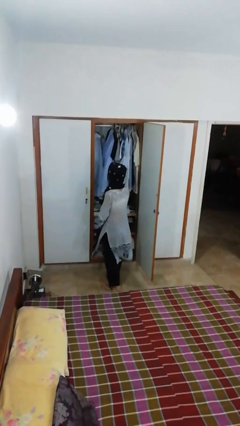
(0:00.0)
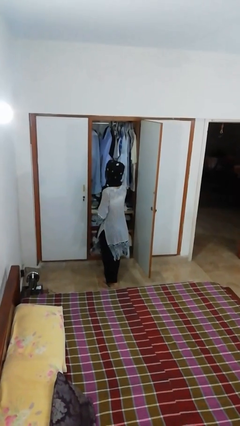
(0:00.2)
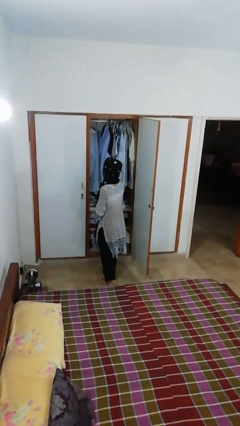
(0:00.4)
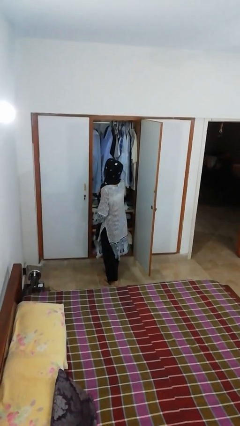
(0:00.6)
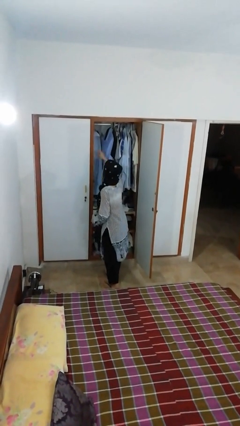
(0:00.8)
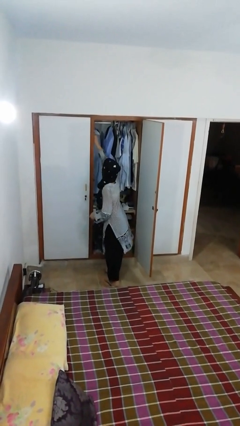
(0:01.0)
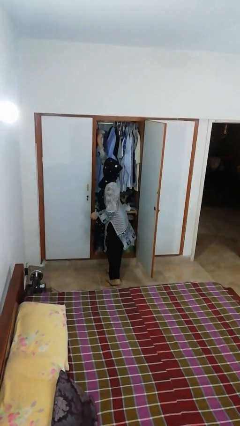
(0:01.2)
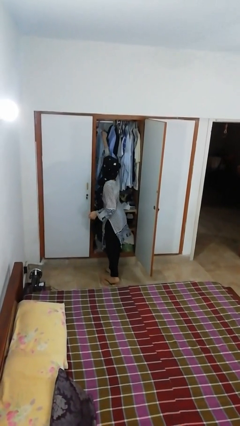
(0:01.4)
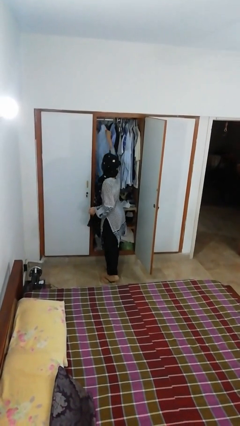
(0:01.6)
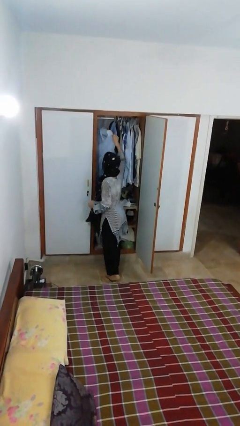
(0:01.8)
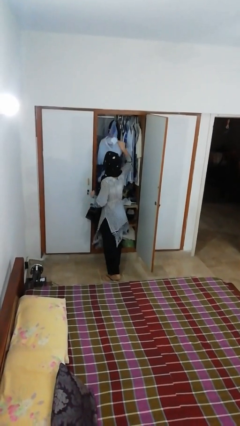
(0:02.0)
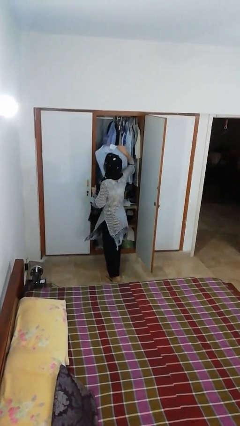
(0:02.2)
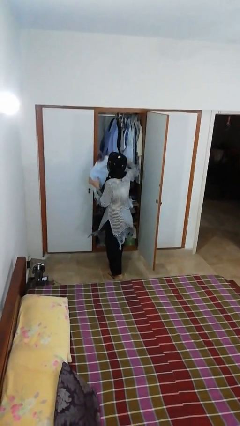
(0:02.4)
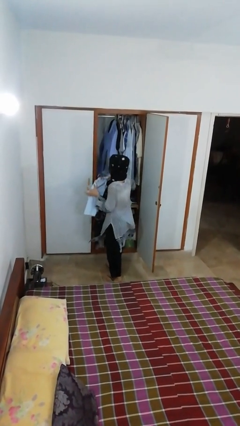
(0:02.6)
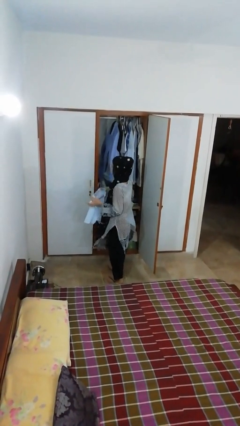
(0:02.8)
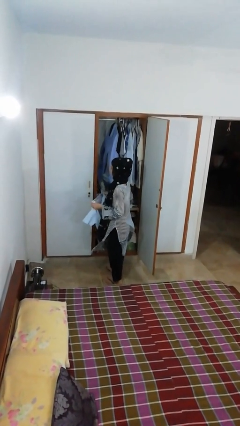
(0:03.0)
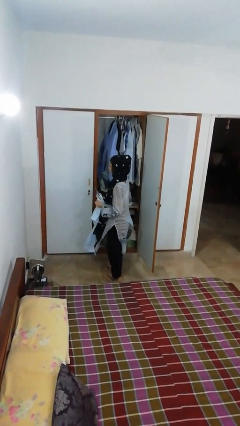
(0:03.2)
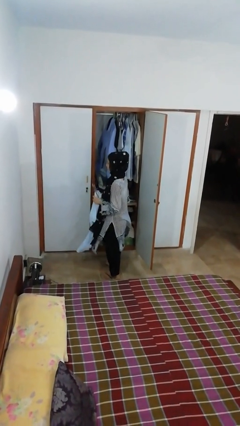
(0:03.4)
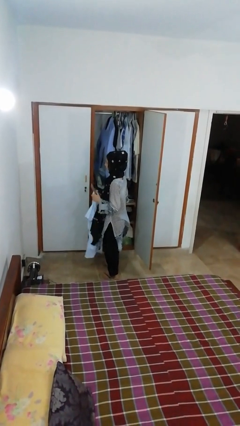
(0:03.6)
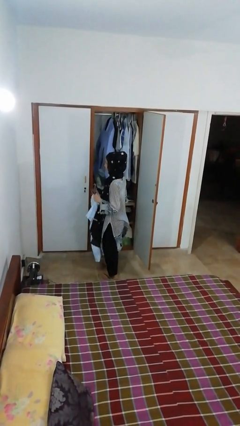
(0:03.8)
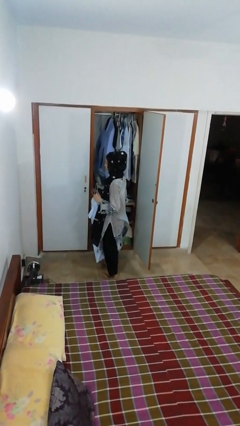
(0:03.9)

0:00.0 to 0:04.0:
person takes clothes from closet

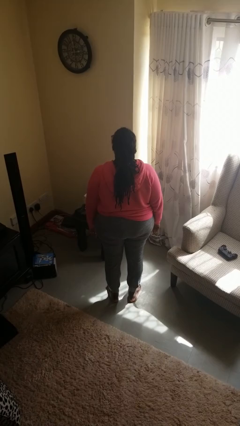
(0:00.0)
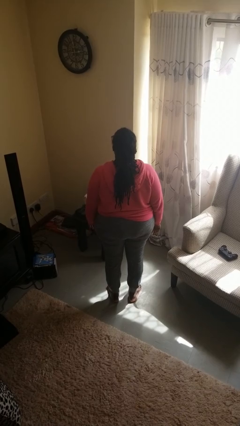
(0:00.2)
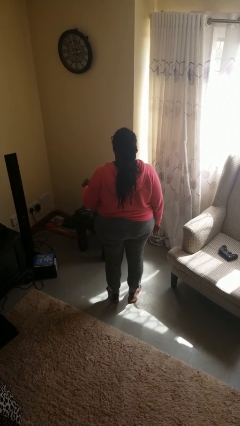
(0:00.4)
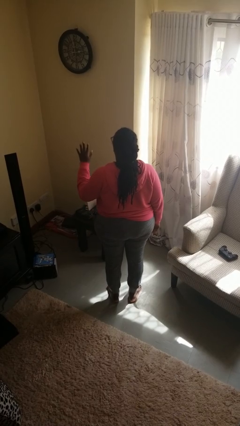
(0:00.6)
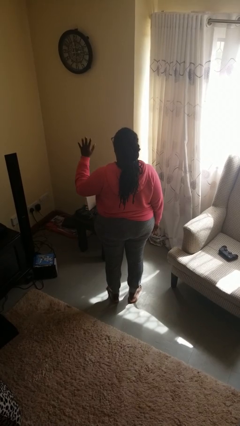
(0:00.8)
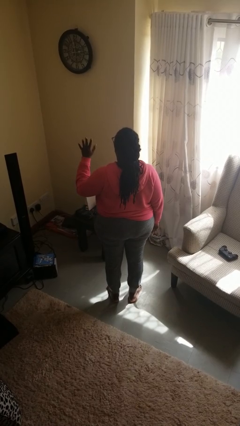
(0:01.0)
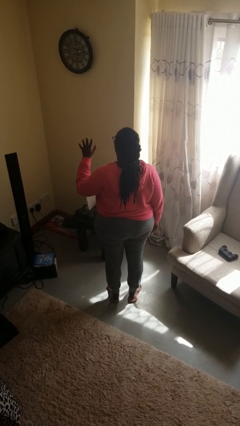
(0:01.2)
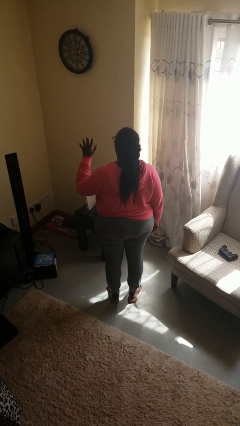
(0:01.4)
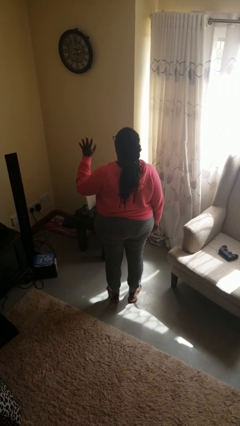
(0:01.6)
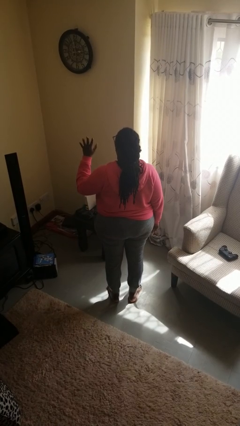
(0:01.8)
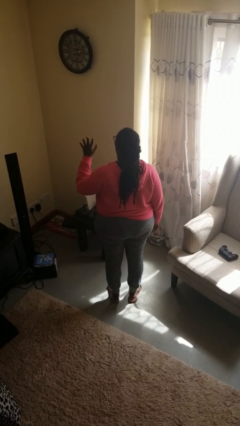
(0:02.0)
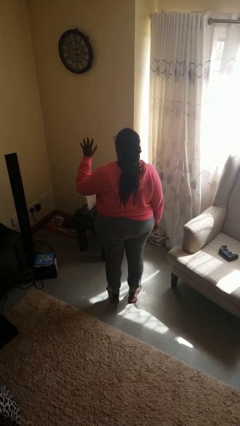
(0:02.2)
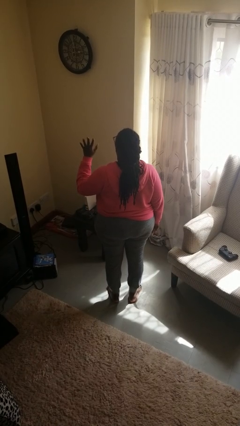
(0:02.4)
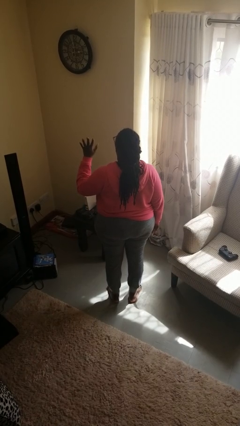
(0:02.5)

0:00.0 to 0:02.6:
person gestures number five

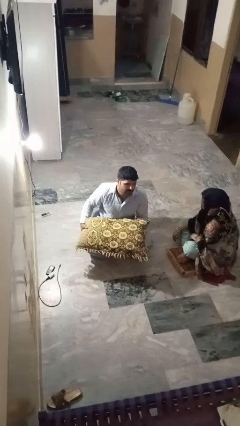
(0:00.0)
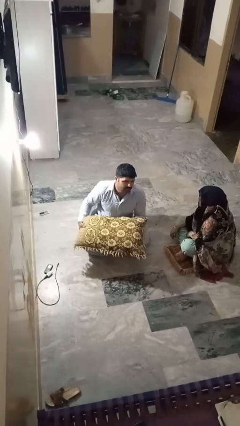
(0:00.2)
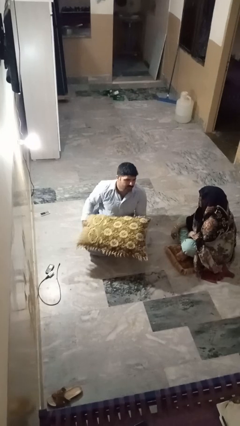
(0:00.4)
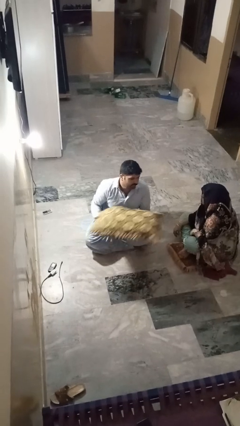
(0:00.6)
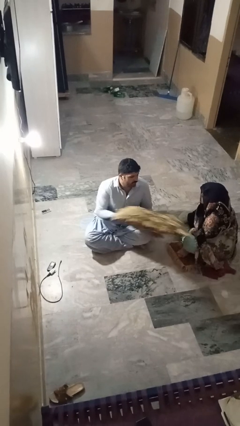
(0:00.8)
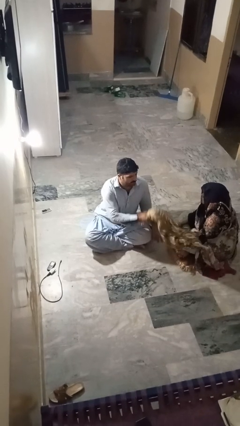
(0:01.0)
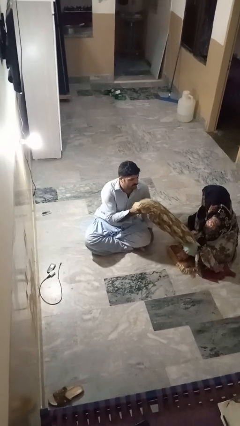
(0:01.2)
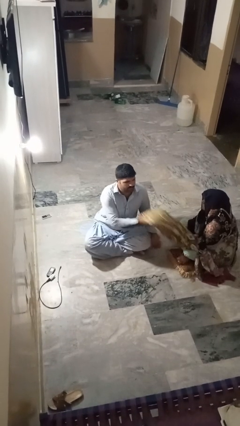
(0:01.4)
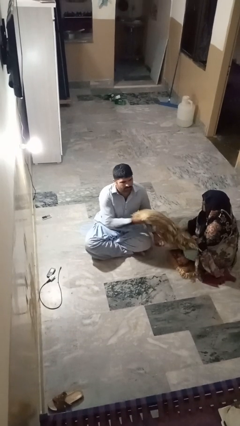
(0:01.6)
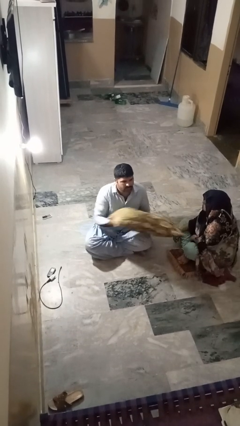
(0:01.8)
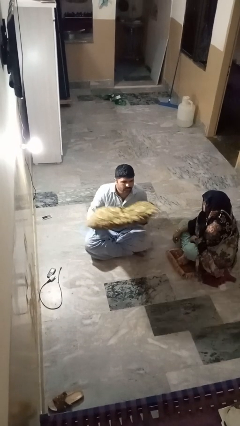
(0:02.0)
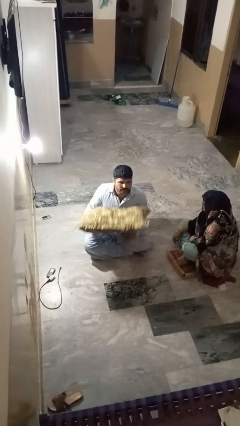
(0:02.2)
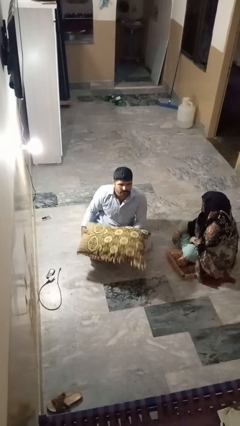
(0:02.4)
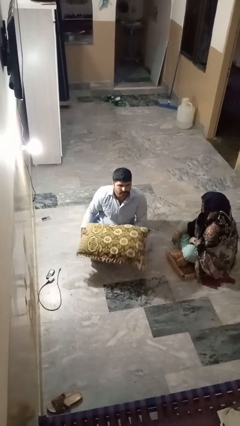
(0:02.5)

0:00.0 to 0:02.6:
person hits person with pillow

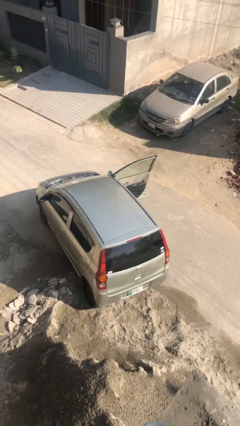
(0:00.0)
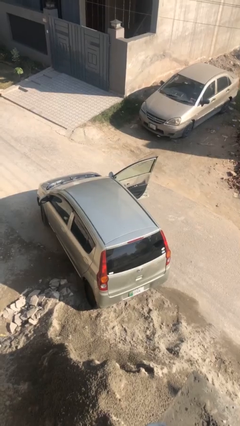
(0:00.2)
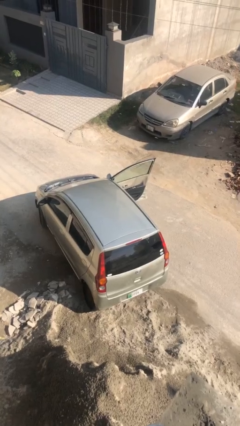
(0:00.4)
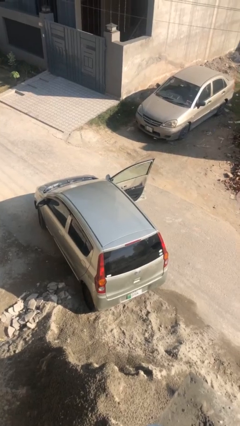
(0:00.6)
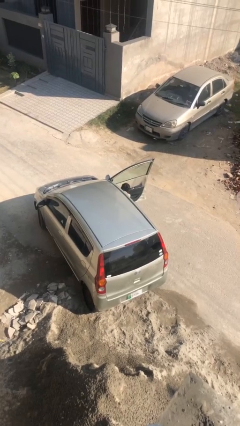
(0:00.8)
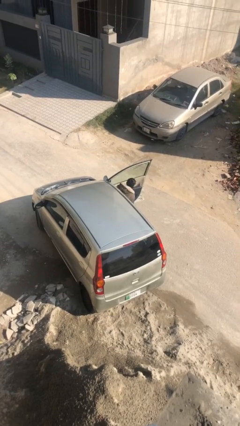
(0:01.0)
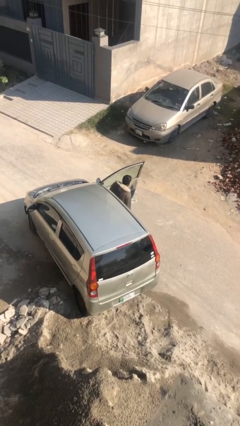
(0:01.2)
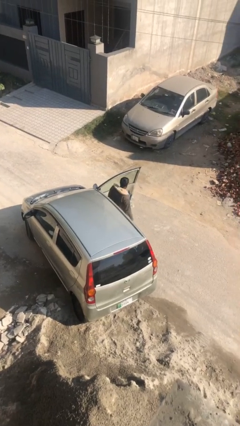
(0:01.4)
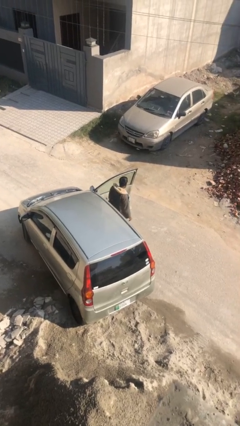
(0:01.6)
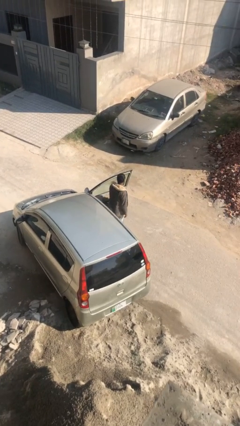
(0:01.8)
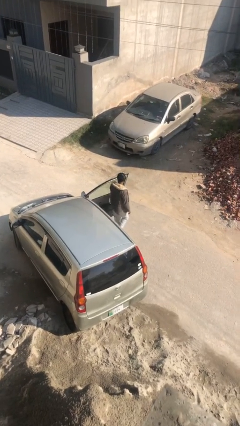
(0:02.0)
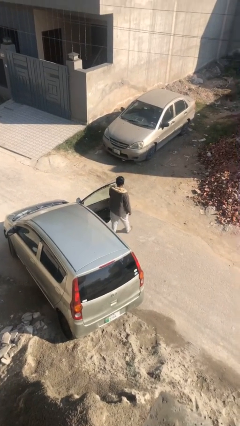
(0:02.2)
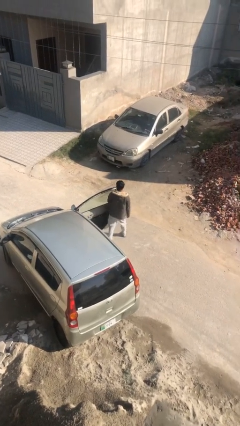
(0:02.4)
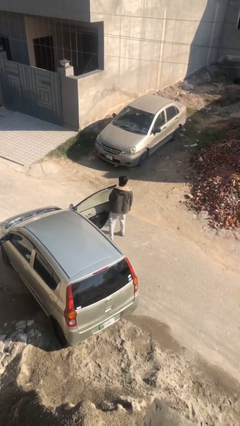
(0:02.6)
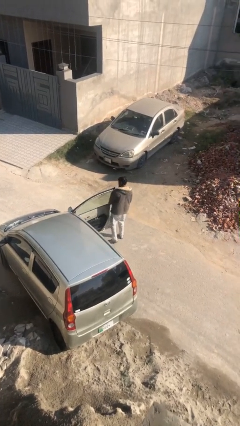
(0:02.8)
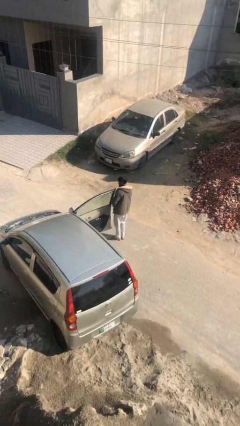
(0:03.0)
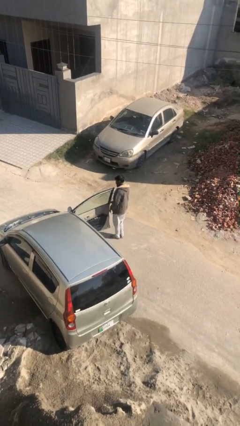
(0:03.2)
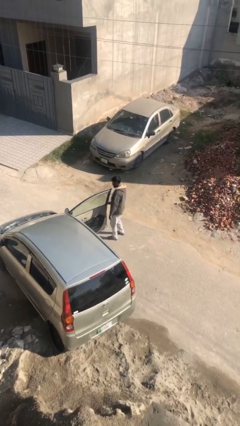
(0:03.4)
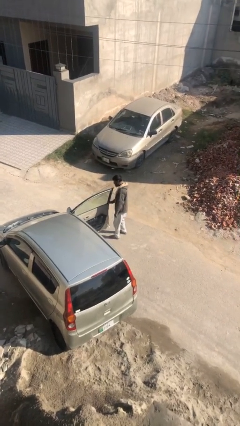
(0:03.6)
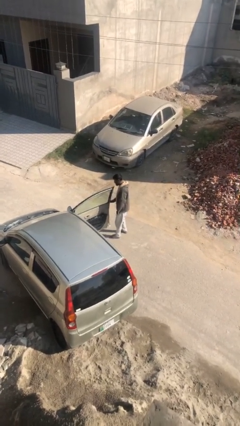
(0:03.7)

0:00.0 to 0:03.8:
person exits car

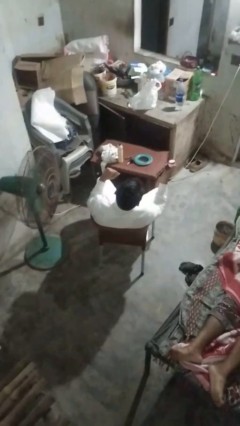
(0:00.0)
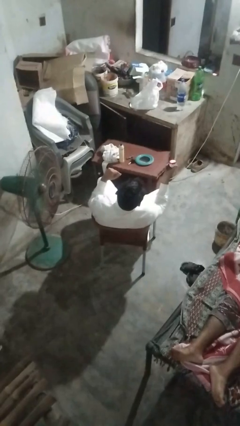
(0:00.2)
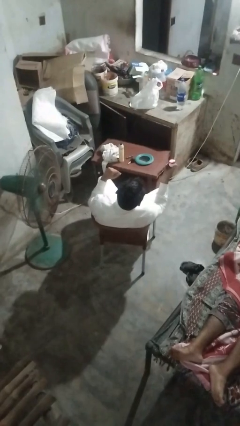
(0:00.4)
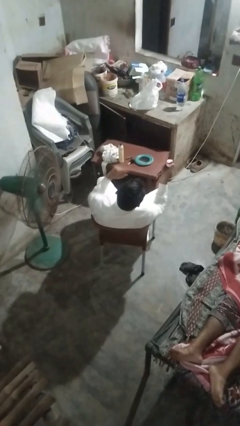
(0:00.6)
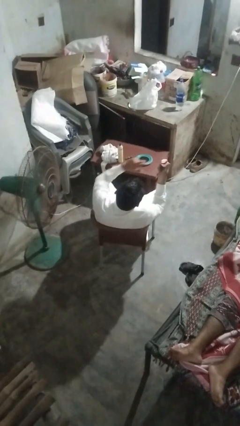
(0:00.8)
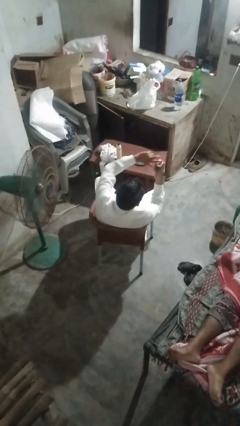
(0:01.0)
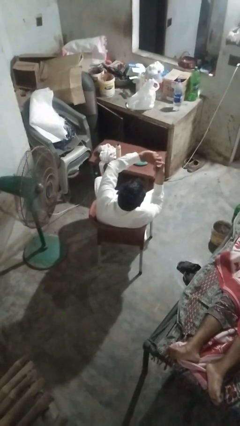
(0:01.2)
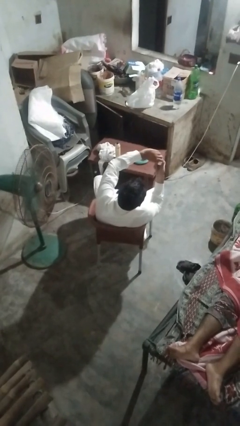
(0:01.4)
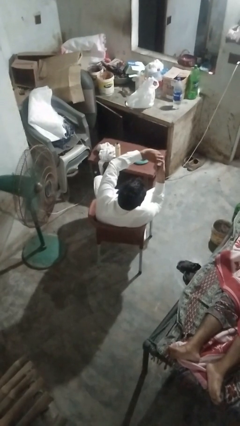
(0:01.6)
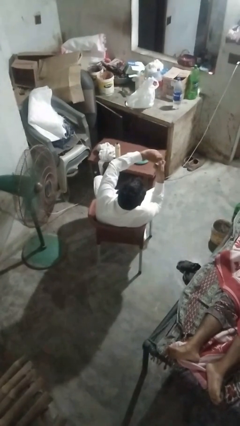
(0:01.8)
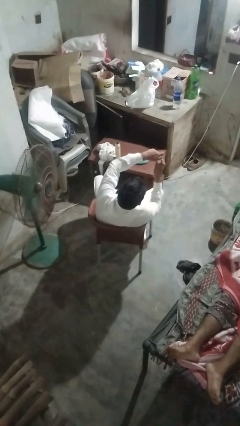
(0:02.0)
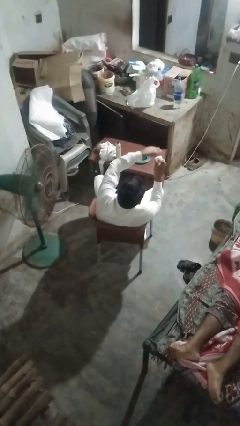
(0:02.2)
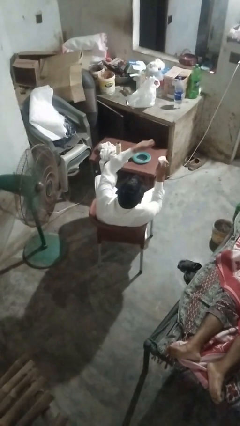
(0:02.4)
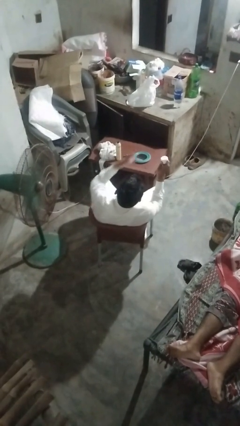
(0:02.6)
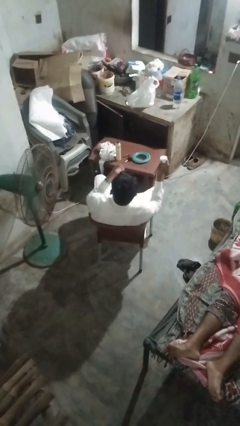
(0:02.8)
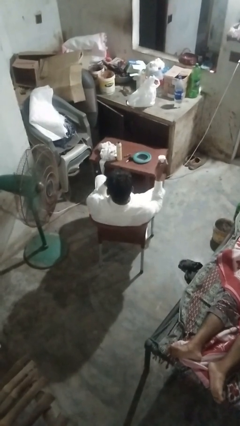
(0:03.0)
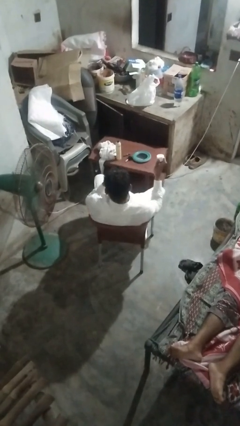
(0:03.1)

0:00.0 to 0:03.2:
person opens jar

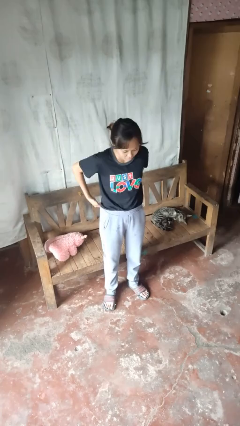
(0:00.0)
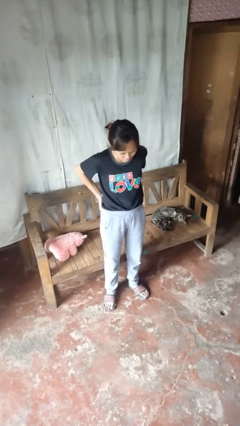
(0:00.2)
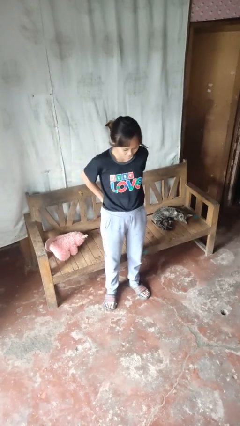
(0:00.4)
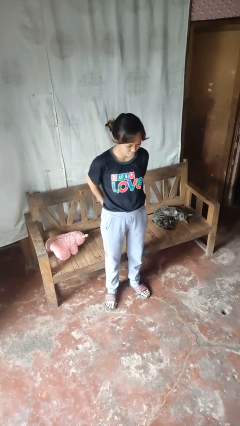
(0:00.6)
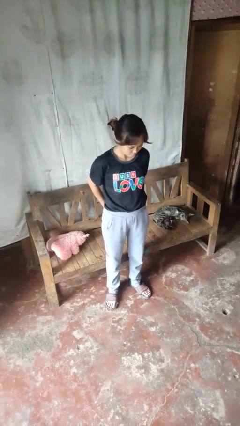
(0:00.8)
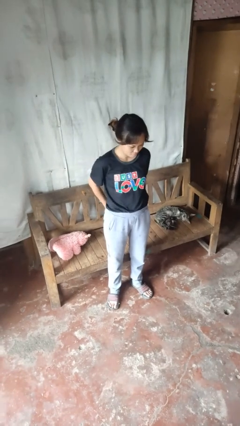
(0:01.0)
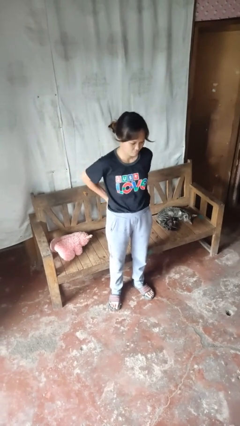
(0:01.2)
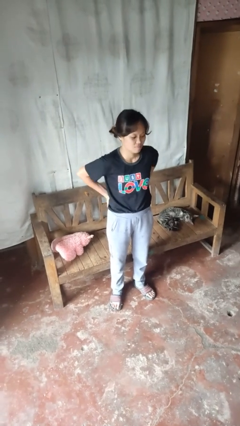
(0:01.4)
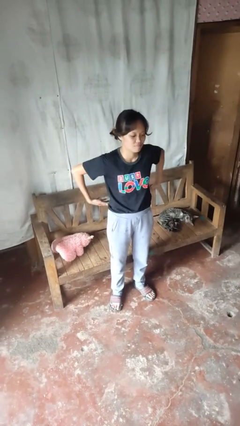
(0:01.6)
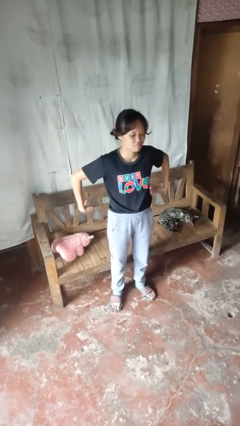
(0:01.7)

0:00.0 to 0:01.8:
person puts hands in back pockets
